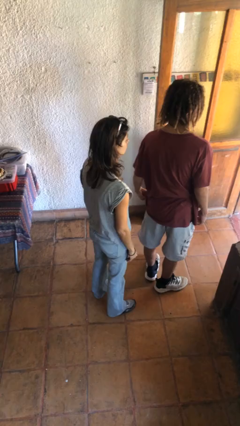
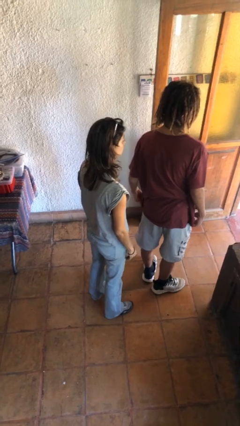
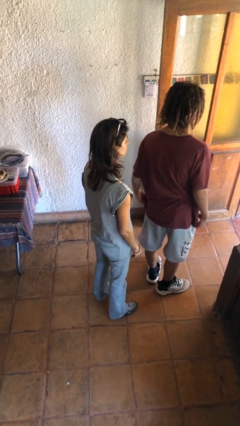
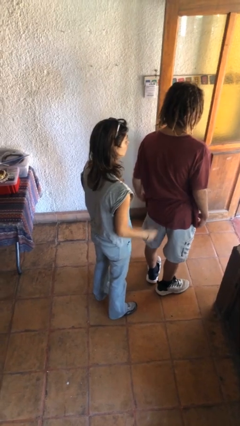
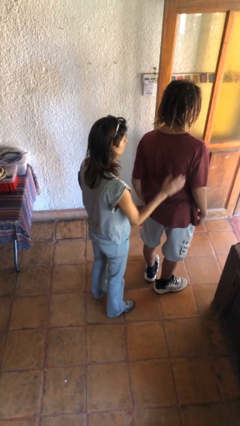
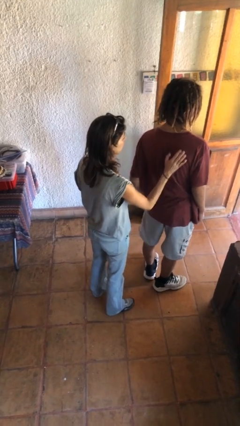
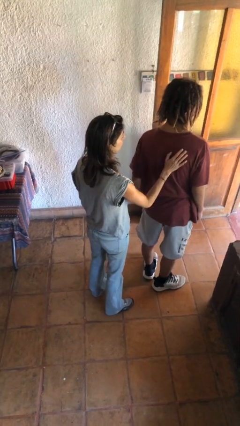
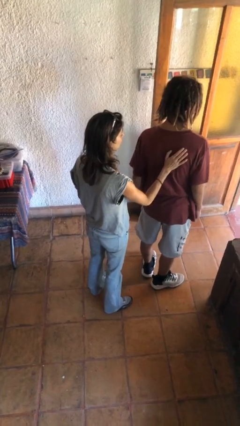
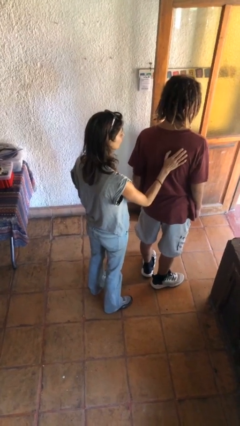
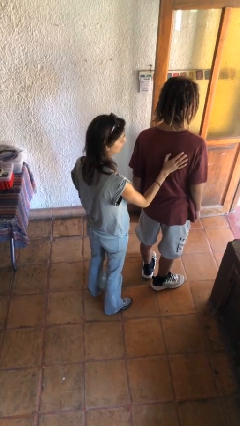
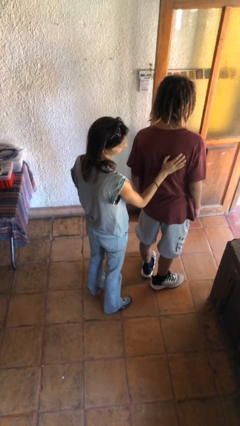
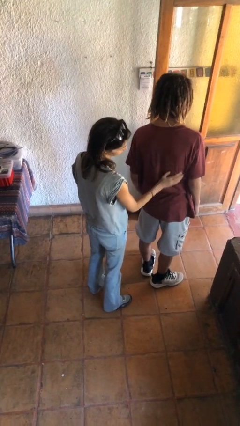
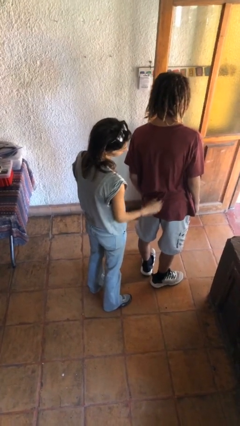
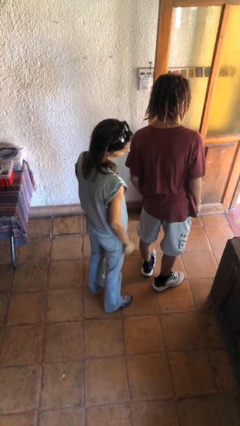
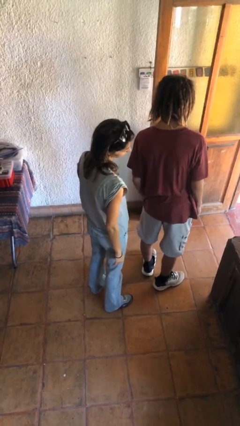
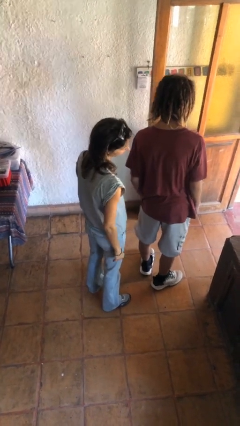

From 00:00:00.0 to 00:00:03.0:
person touches back of person

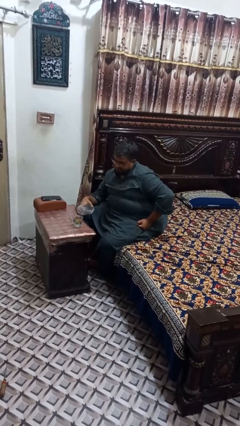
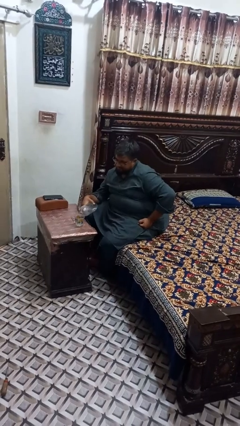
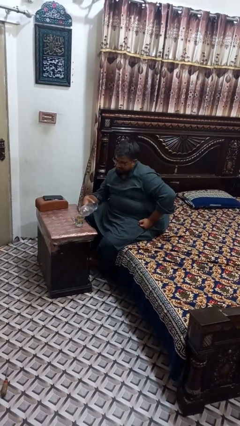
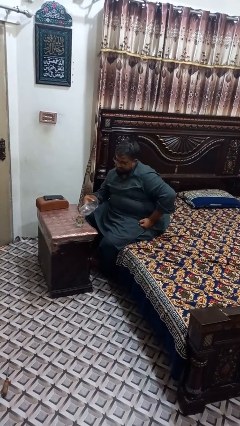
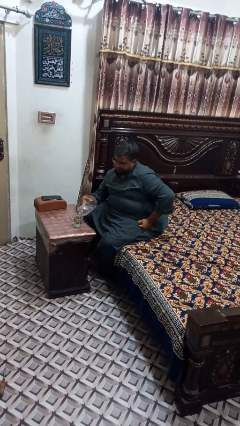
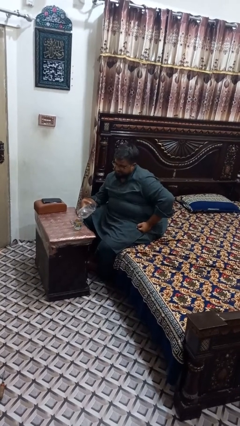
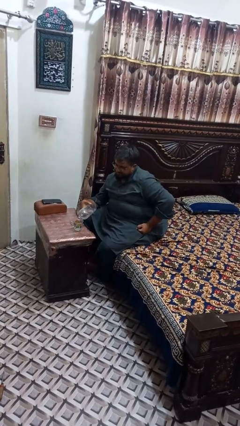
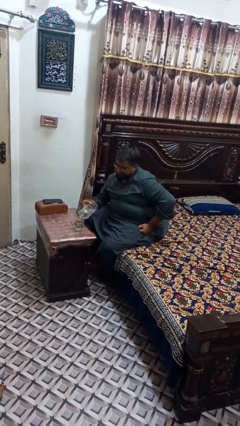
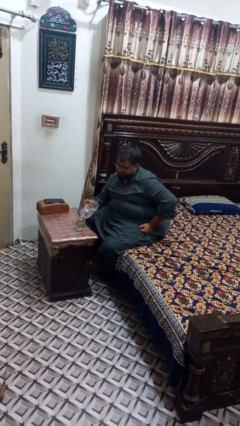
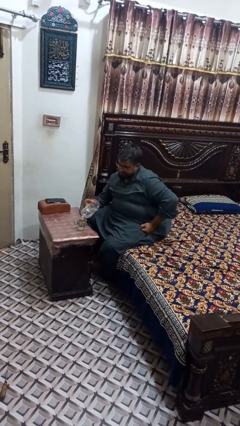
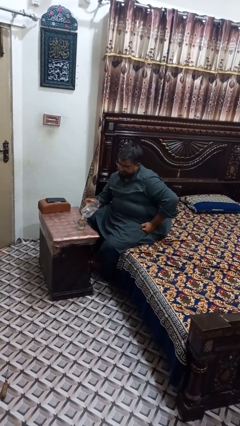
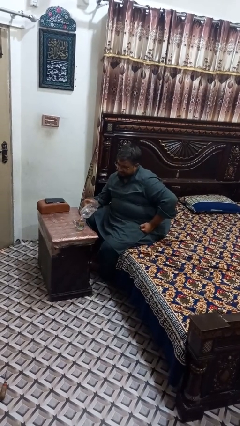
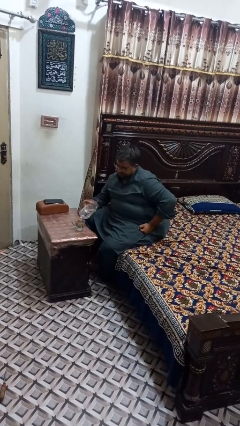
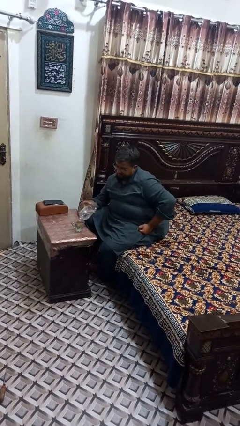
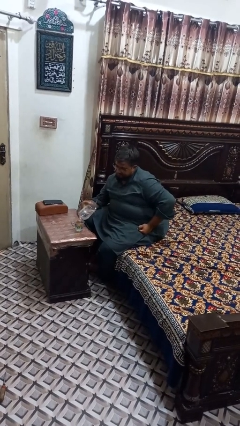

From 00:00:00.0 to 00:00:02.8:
person pours liquid into cup

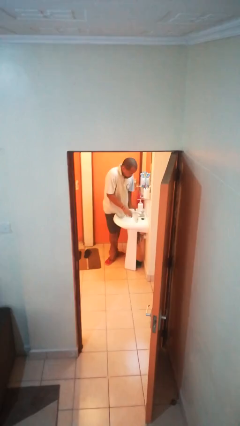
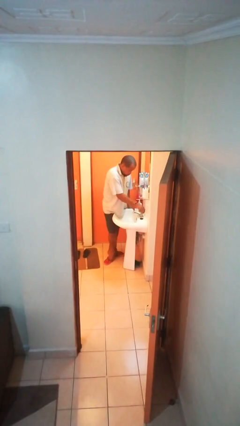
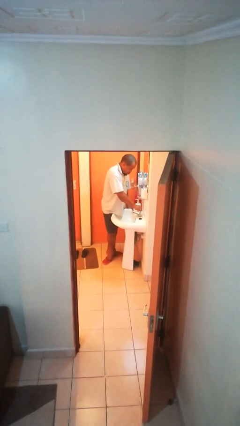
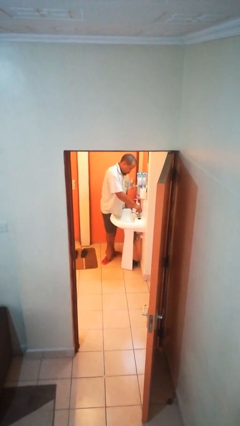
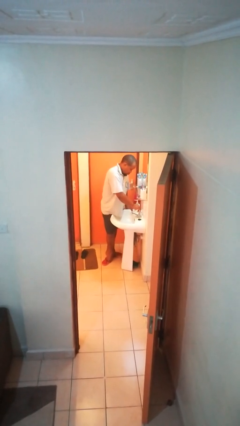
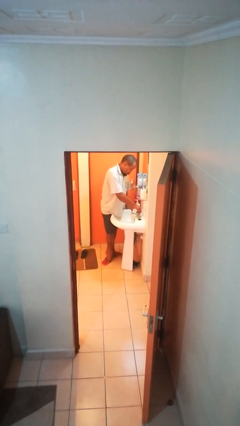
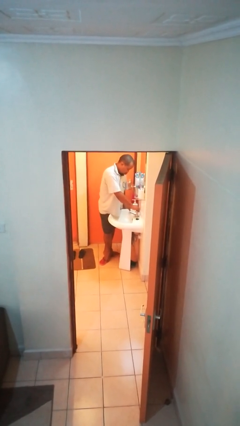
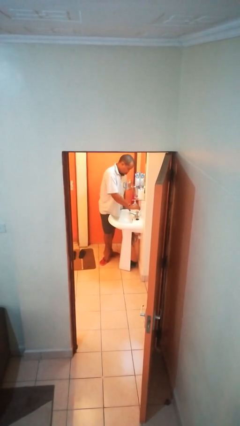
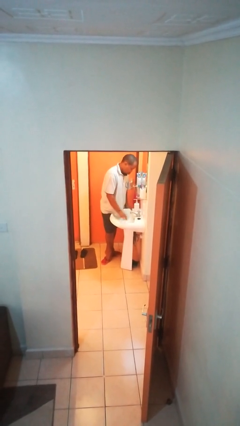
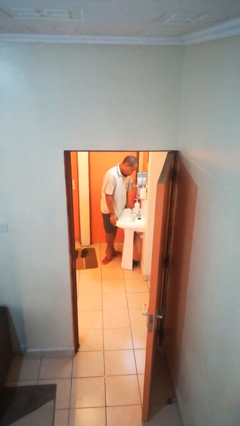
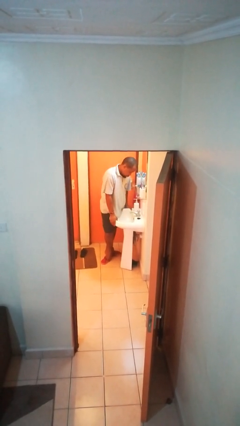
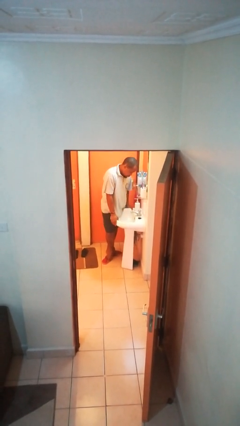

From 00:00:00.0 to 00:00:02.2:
person turns on faucet

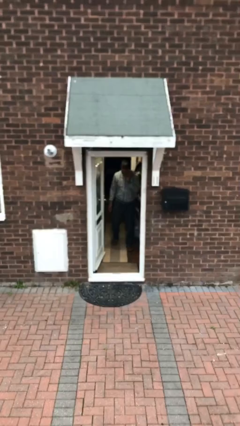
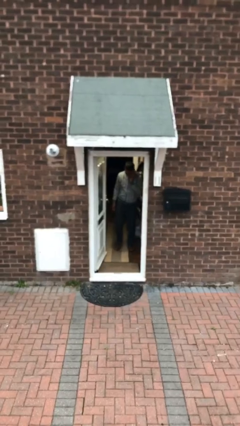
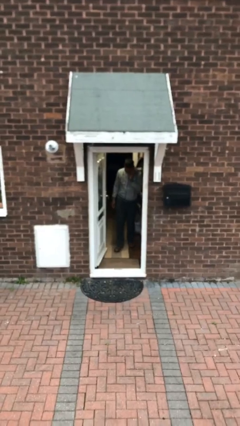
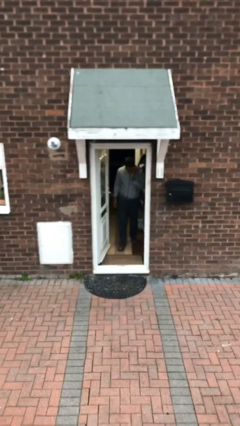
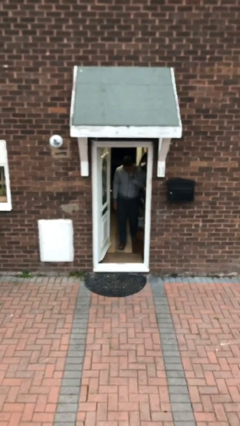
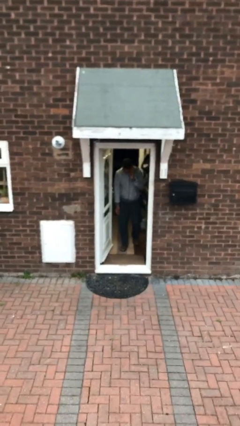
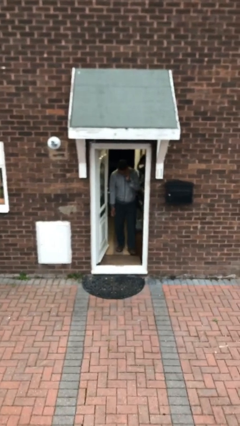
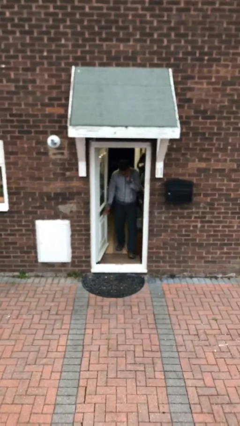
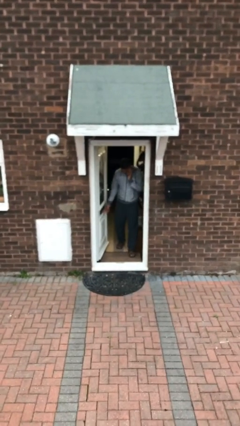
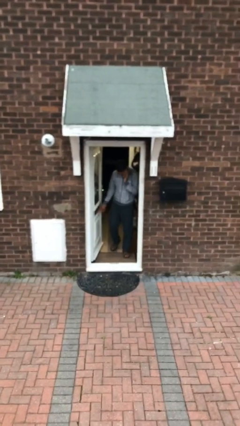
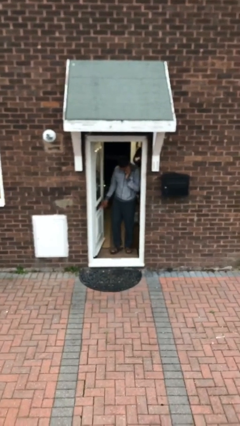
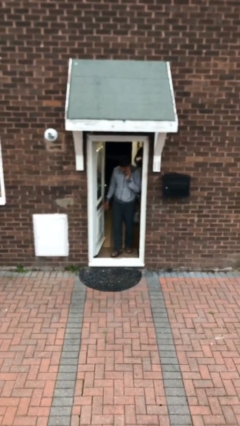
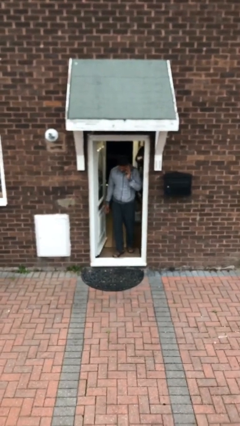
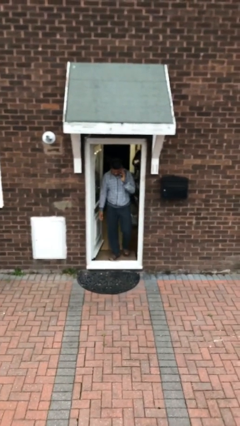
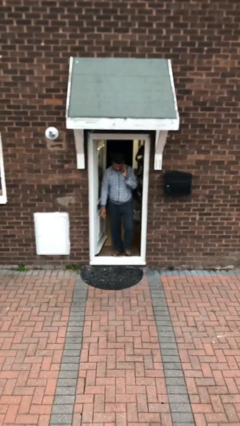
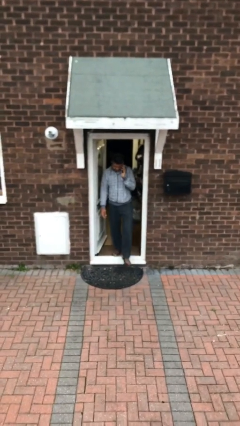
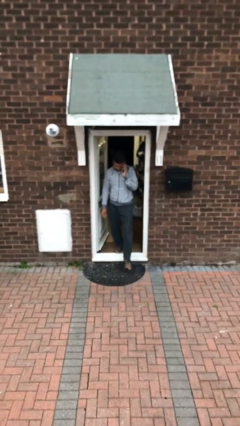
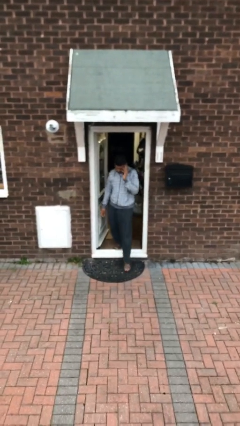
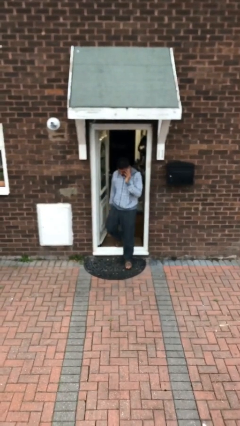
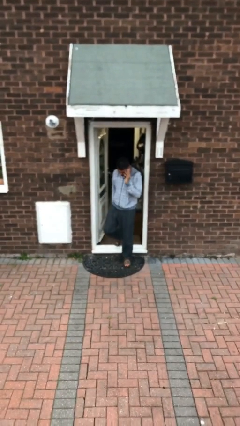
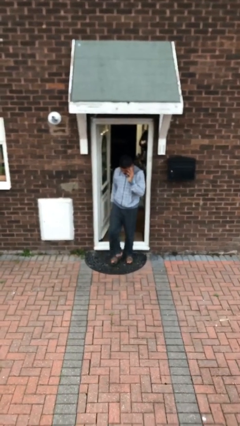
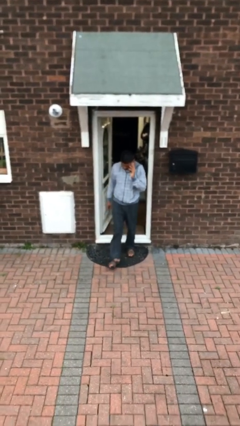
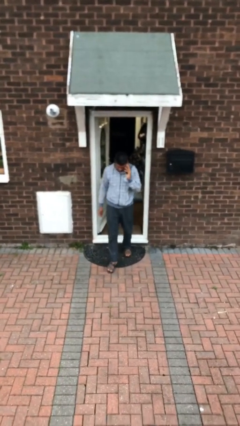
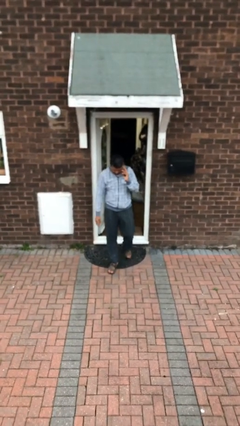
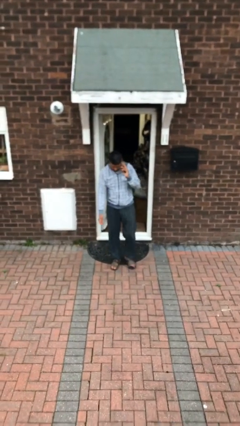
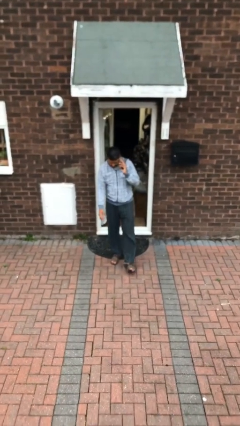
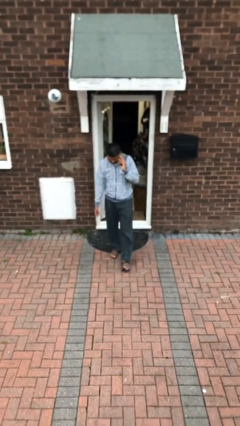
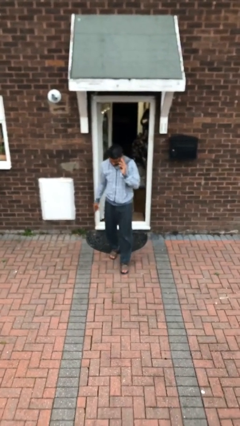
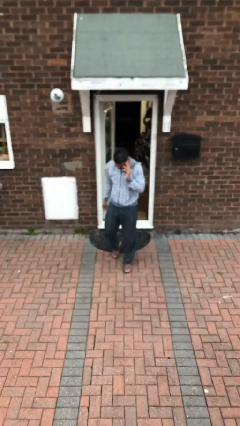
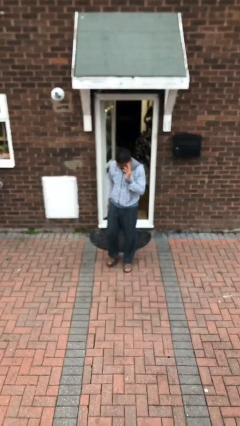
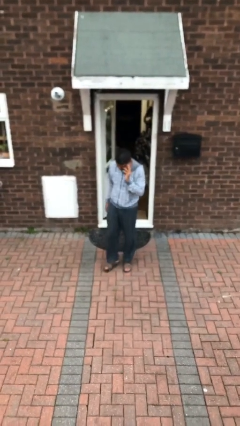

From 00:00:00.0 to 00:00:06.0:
person enters scene through structure

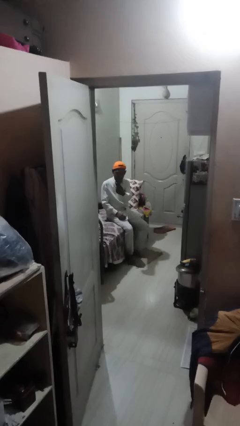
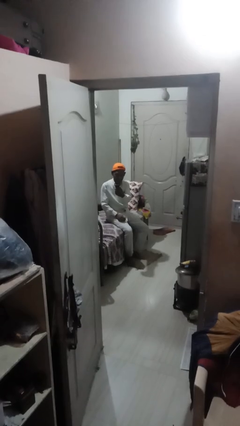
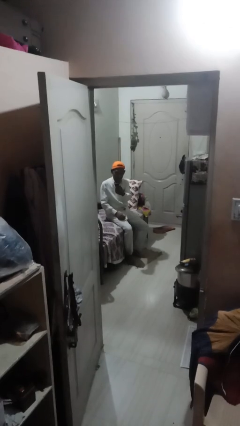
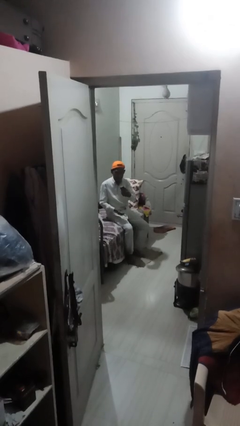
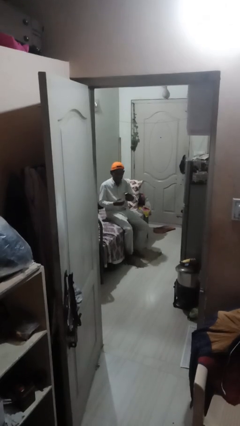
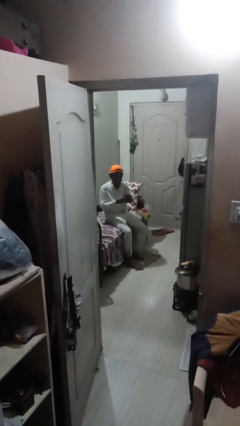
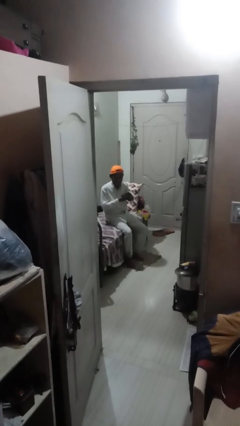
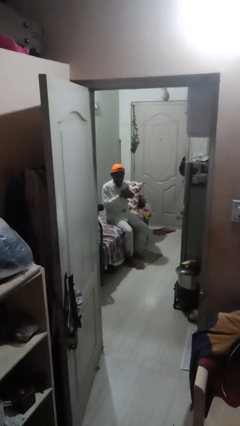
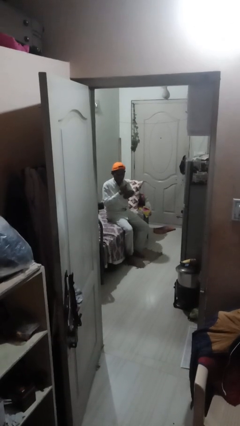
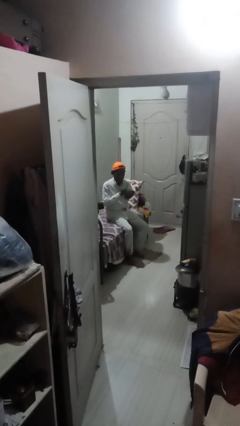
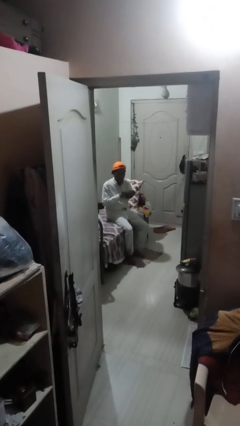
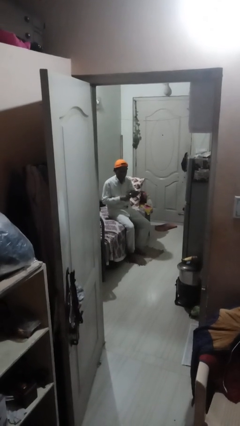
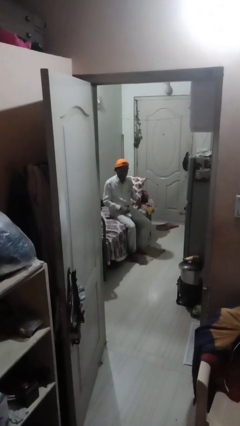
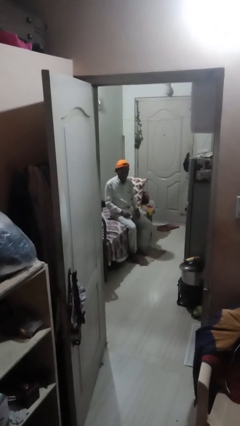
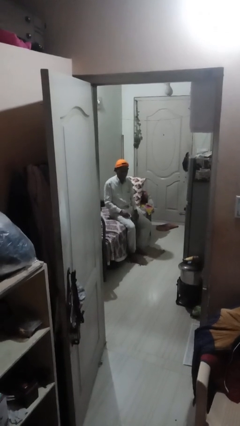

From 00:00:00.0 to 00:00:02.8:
person puts phone into pocket

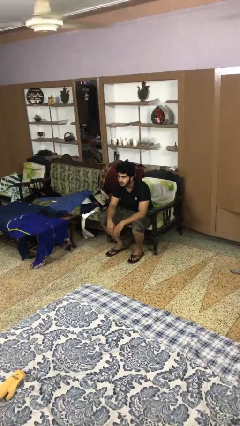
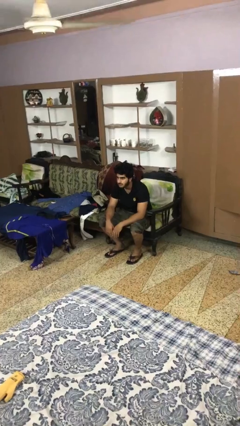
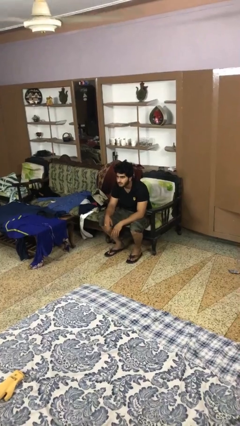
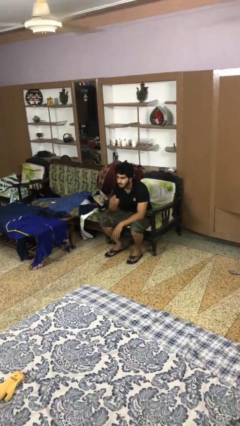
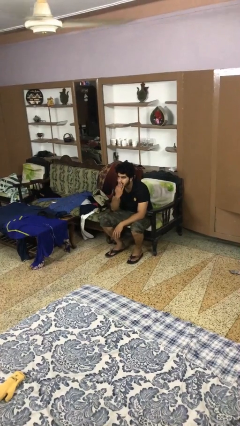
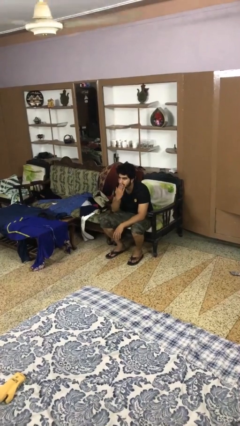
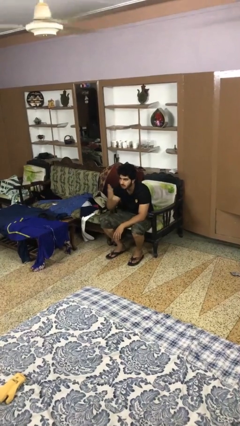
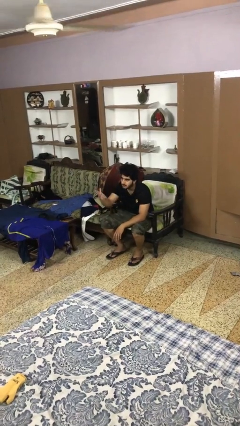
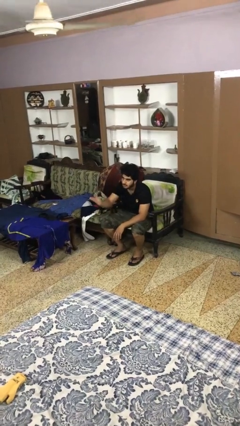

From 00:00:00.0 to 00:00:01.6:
person gestures blow kiss
